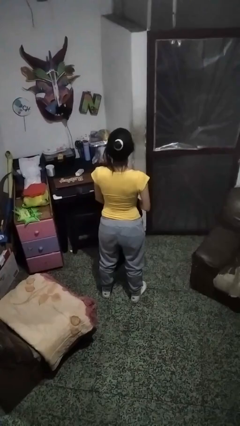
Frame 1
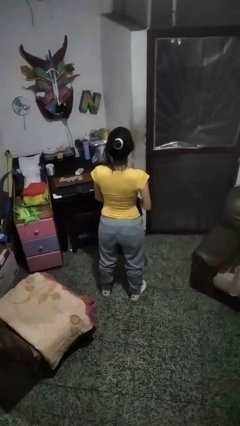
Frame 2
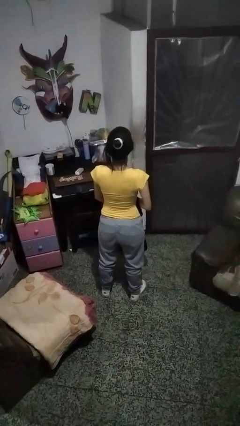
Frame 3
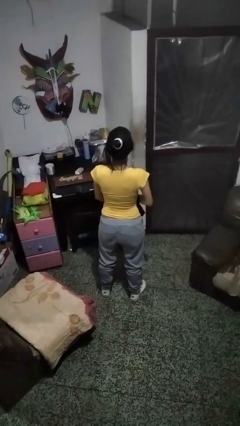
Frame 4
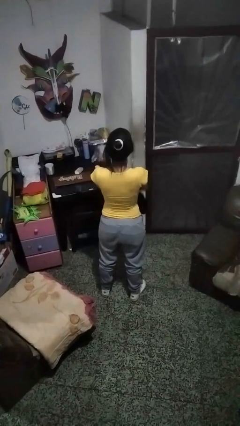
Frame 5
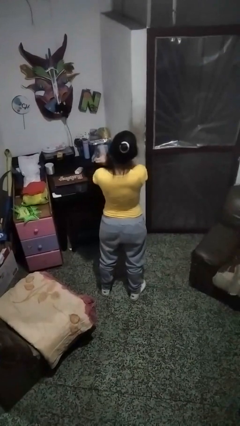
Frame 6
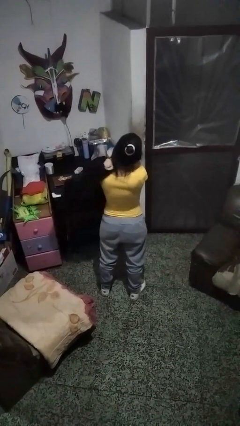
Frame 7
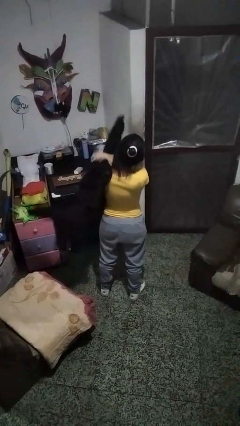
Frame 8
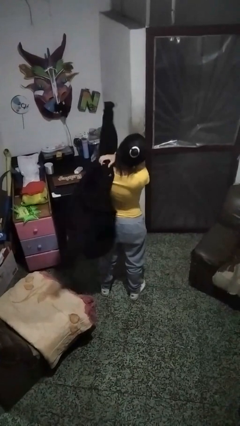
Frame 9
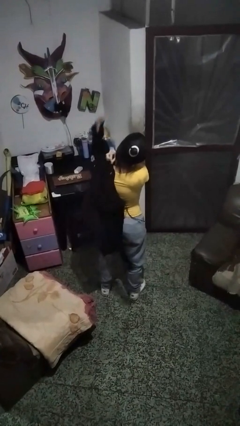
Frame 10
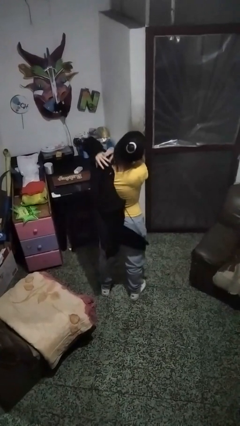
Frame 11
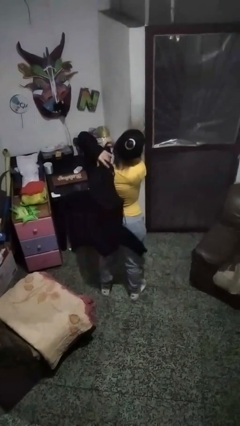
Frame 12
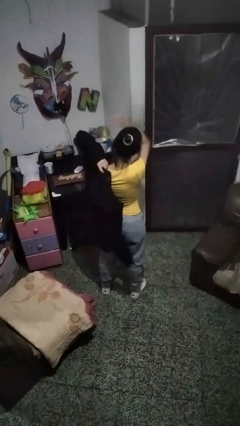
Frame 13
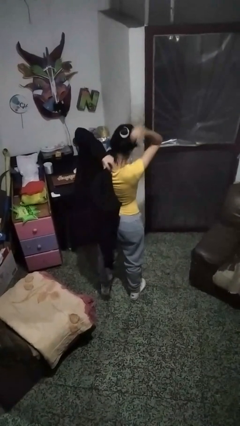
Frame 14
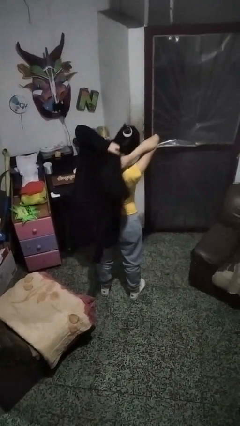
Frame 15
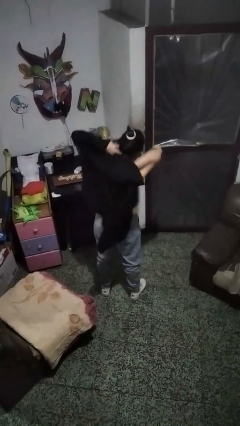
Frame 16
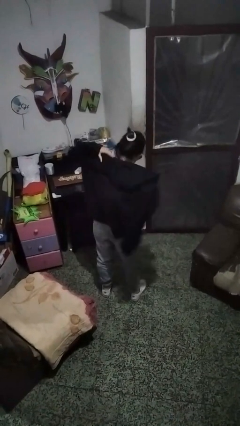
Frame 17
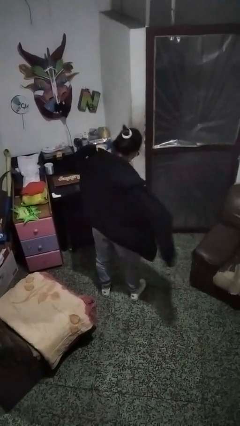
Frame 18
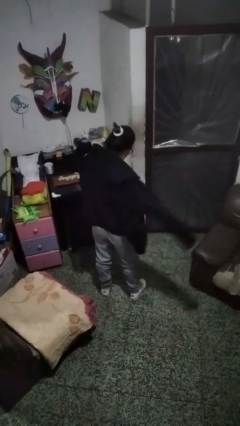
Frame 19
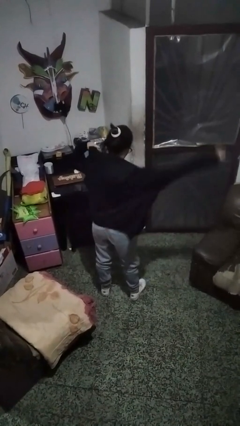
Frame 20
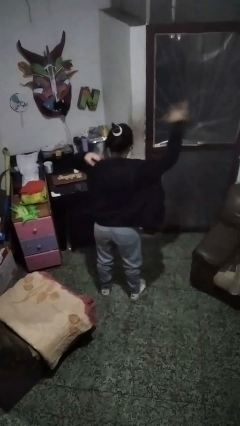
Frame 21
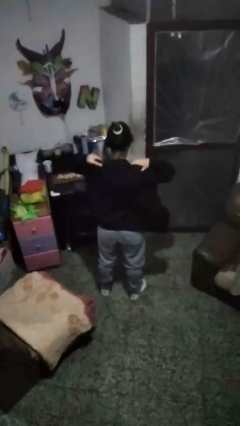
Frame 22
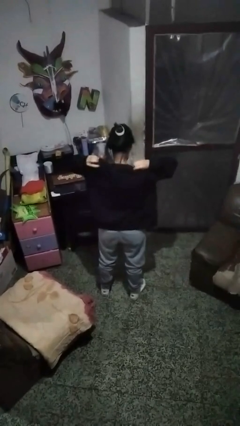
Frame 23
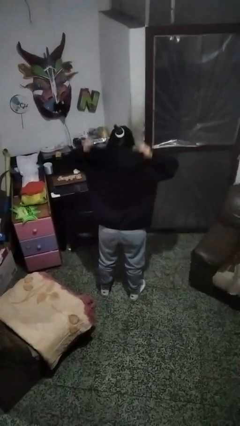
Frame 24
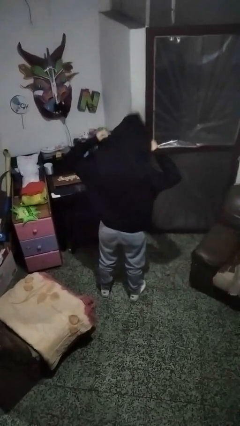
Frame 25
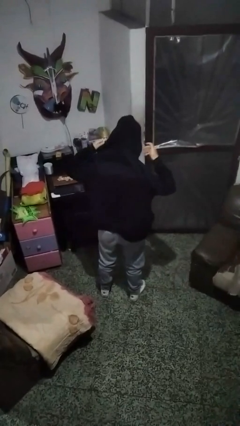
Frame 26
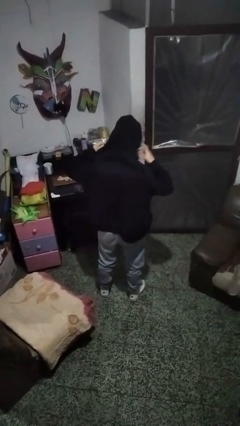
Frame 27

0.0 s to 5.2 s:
person puts on hoodie

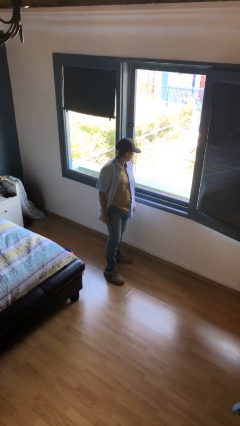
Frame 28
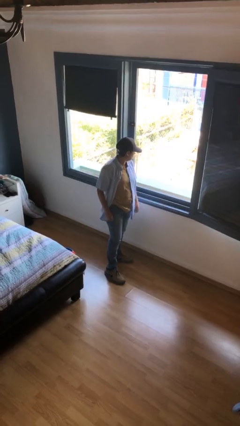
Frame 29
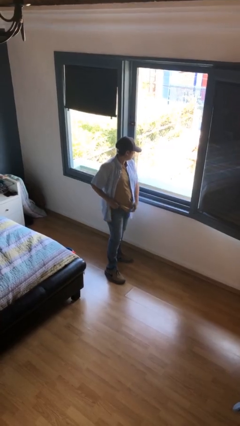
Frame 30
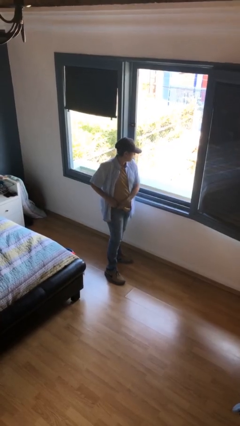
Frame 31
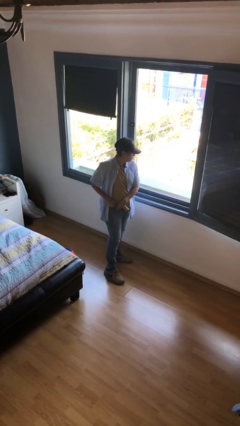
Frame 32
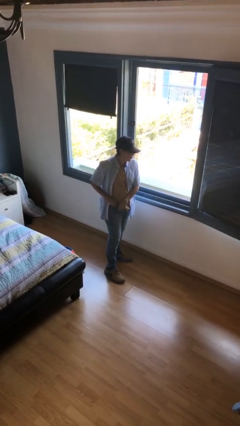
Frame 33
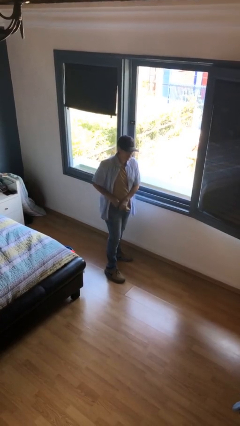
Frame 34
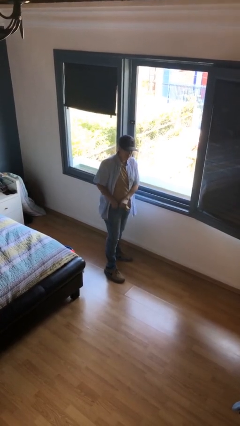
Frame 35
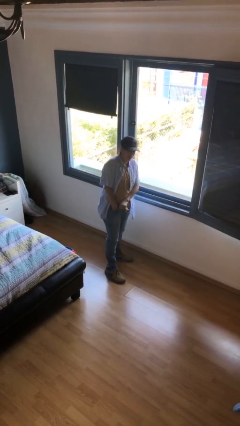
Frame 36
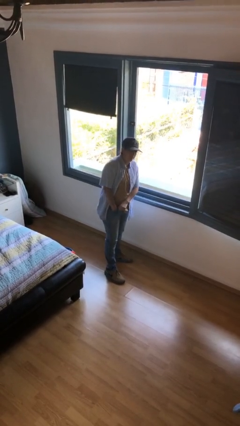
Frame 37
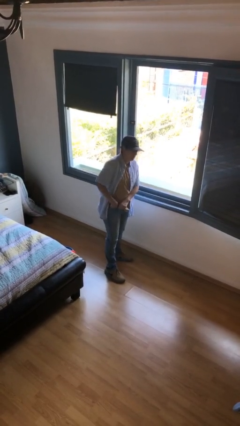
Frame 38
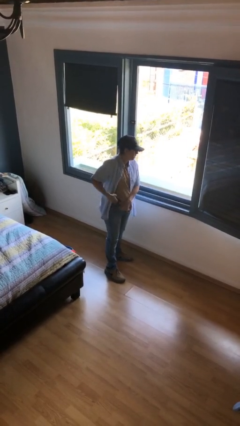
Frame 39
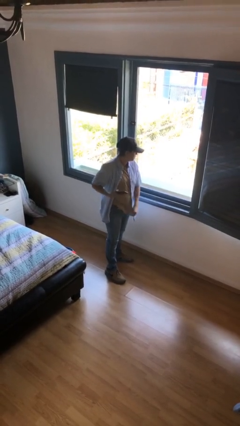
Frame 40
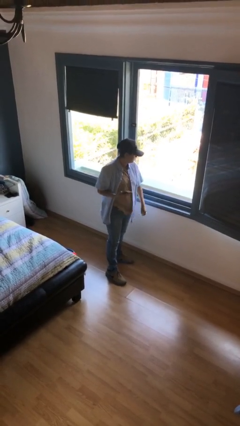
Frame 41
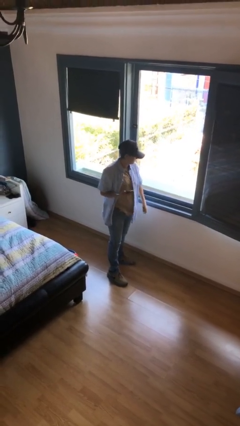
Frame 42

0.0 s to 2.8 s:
person takes phone from pocket

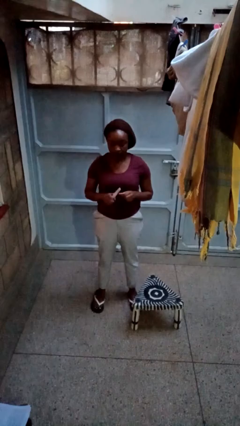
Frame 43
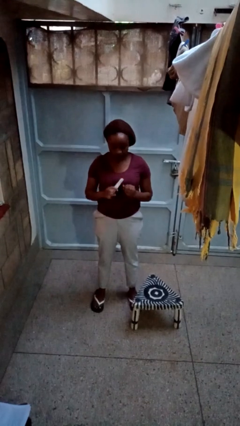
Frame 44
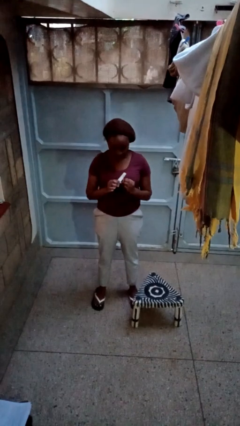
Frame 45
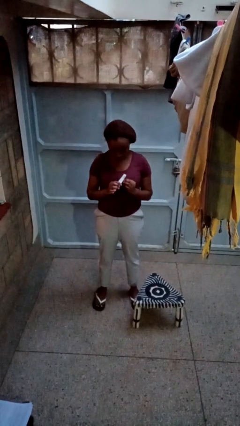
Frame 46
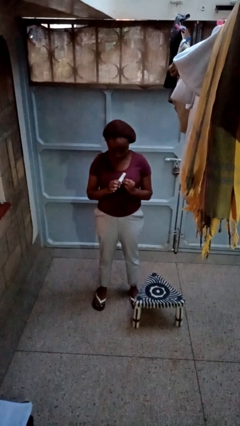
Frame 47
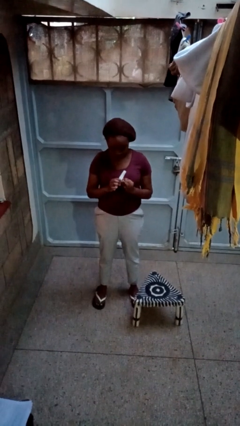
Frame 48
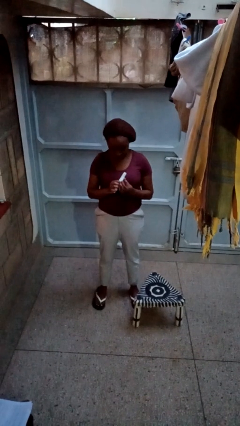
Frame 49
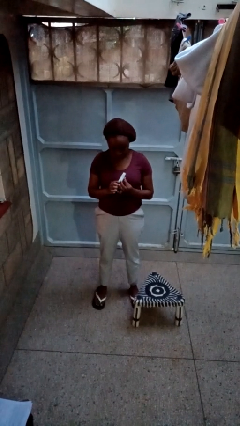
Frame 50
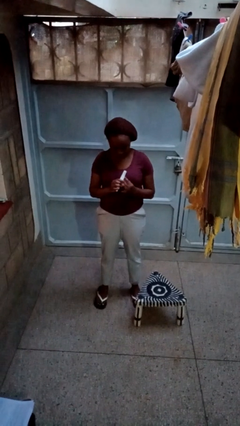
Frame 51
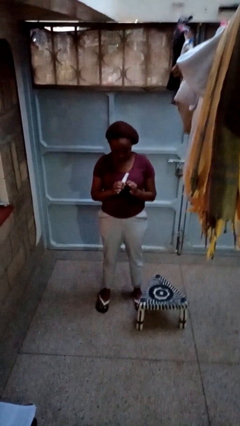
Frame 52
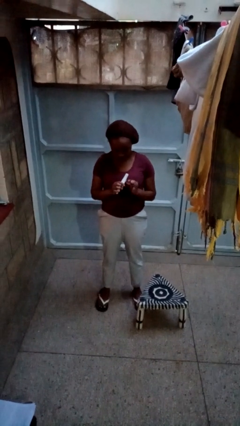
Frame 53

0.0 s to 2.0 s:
person files fingernails

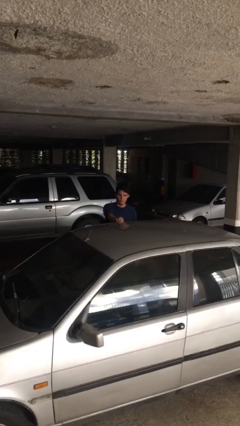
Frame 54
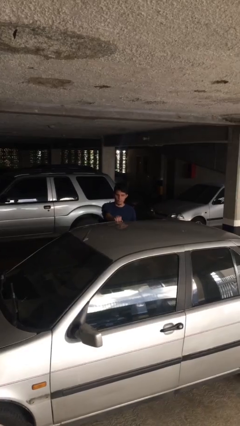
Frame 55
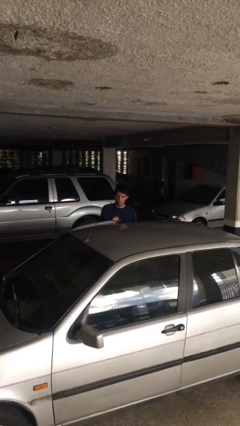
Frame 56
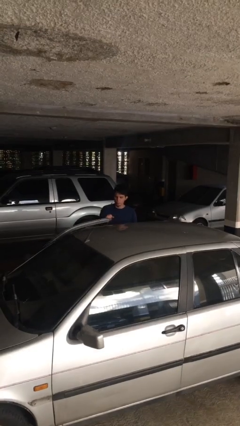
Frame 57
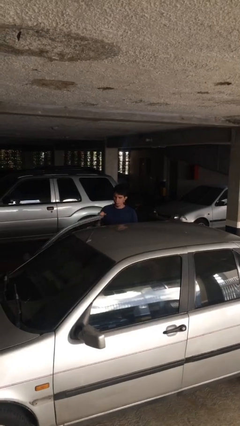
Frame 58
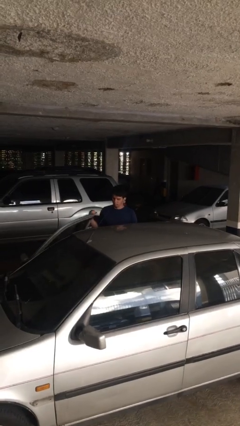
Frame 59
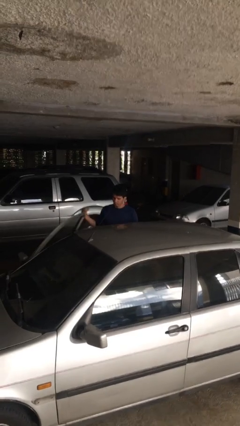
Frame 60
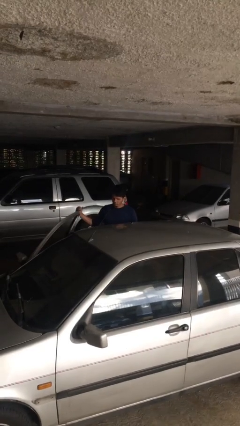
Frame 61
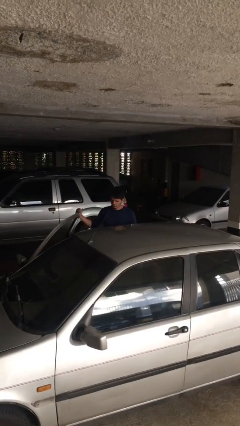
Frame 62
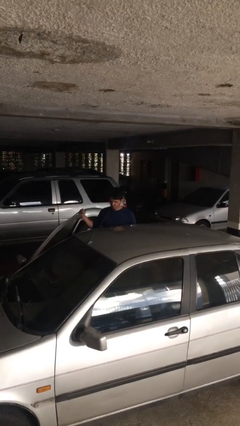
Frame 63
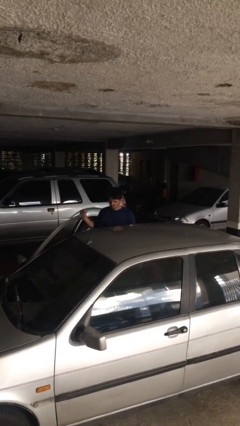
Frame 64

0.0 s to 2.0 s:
person opens car door

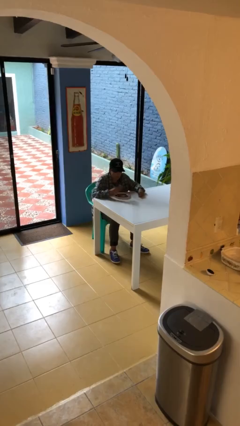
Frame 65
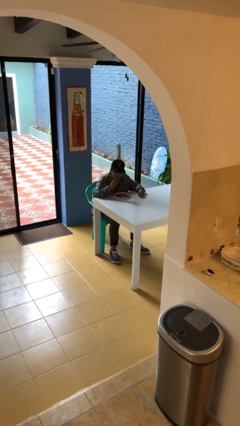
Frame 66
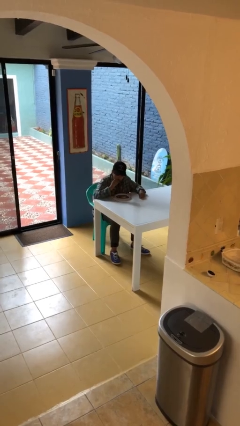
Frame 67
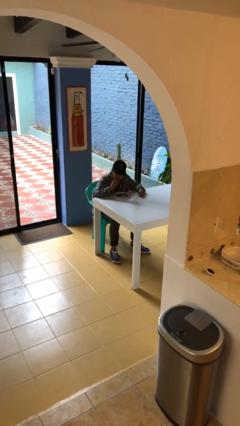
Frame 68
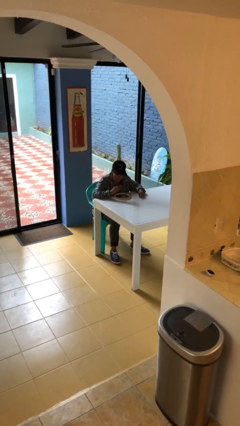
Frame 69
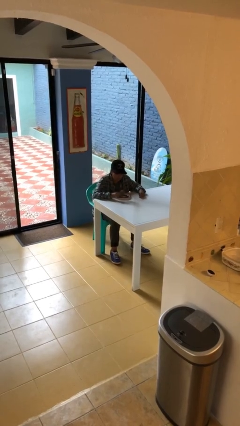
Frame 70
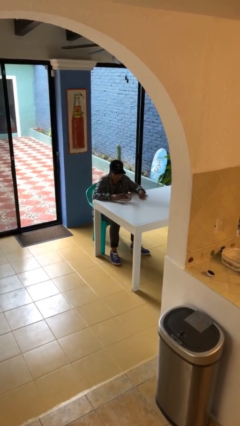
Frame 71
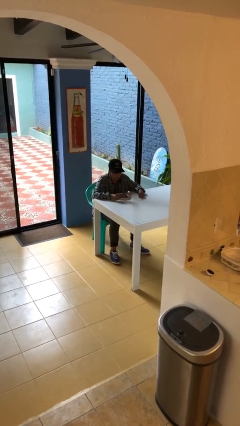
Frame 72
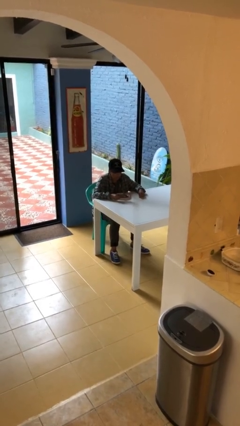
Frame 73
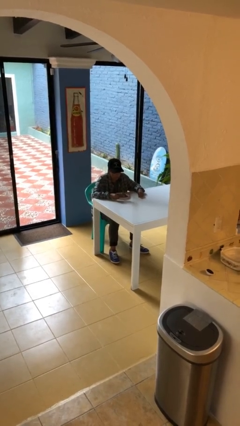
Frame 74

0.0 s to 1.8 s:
person eats with hands

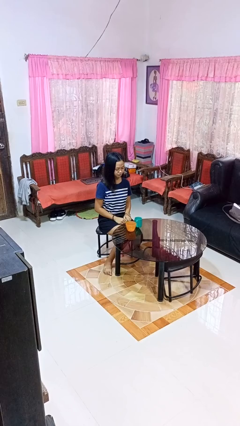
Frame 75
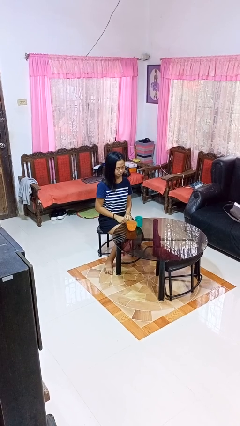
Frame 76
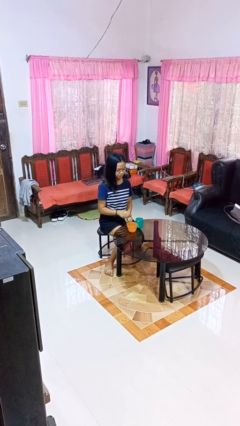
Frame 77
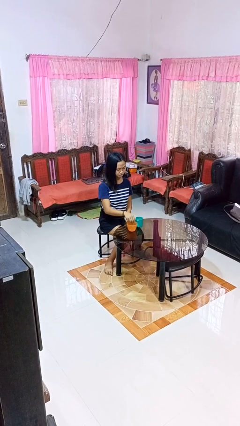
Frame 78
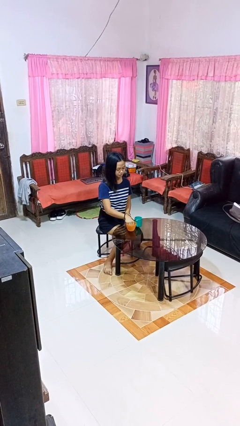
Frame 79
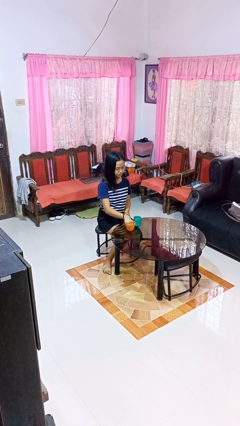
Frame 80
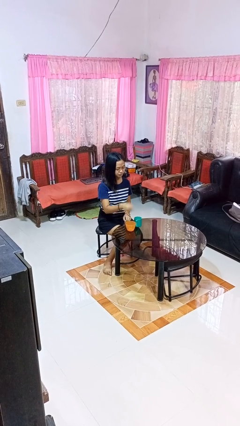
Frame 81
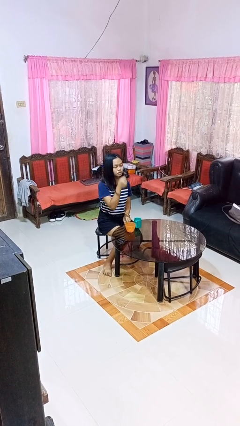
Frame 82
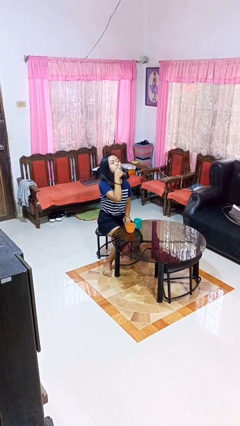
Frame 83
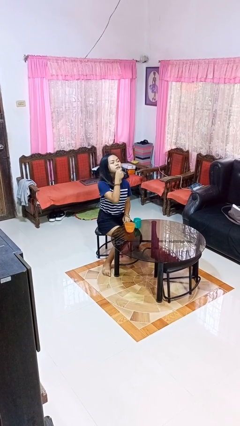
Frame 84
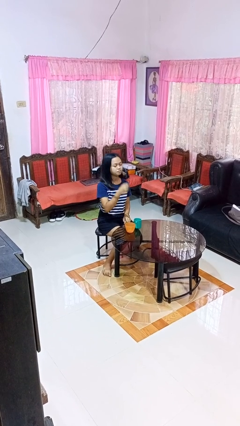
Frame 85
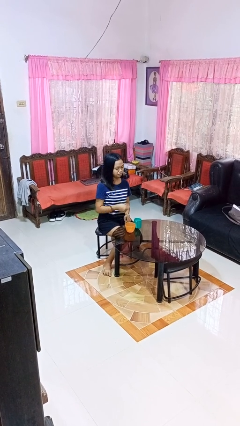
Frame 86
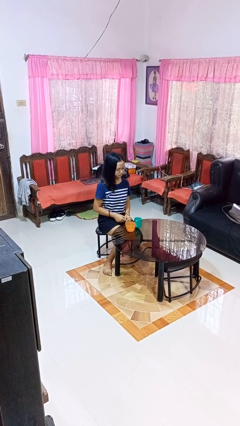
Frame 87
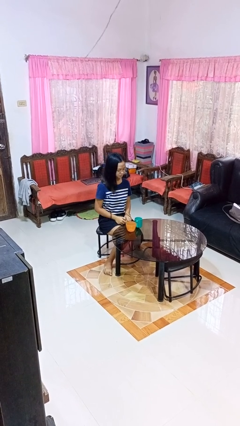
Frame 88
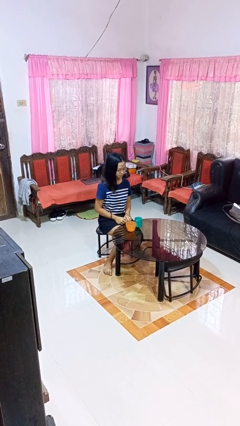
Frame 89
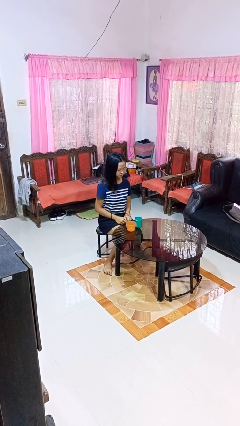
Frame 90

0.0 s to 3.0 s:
person takes medicine pills

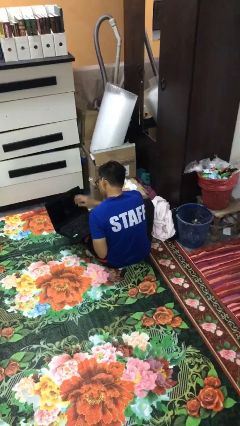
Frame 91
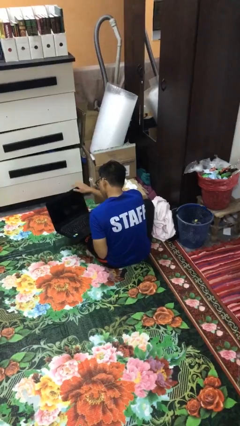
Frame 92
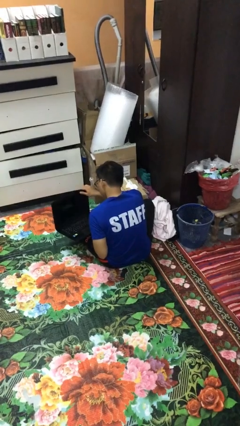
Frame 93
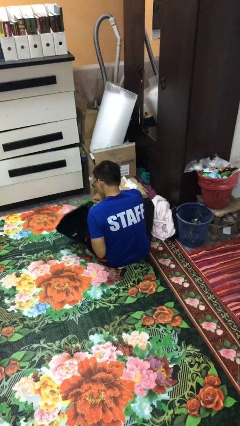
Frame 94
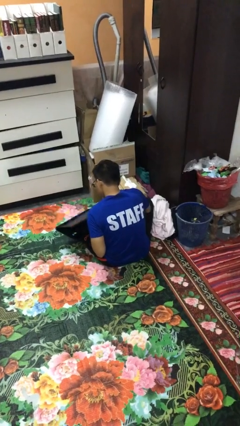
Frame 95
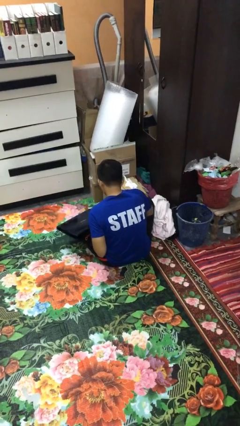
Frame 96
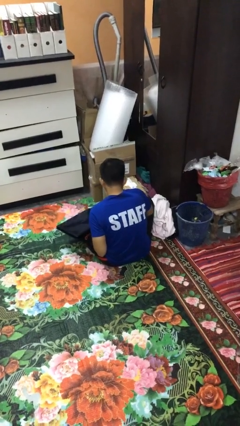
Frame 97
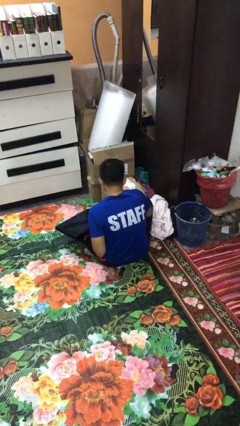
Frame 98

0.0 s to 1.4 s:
person closes laptop
